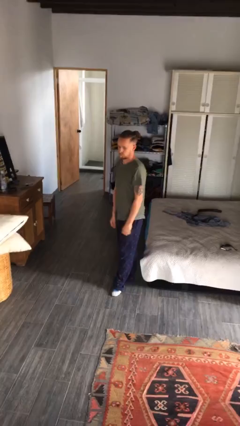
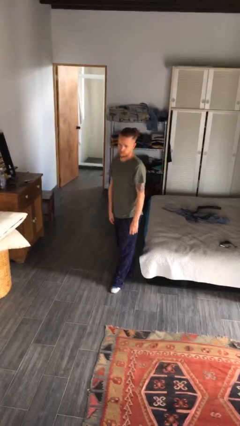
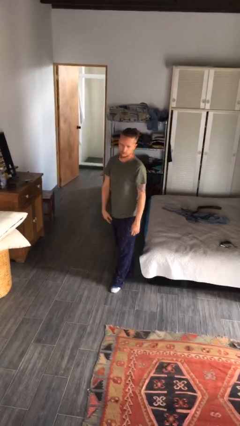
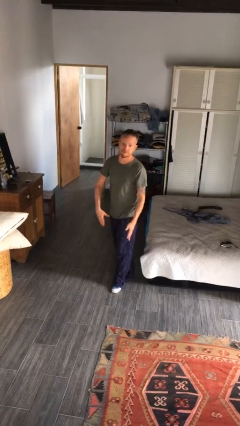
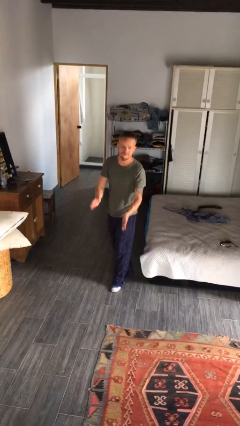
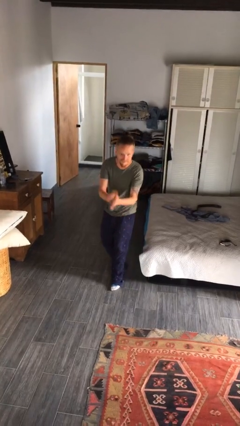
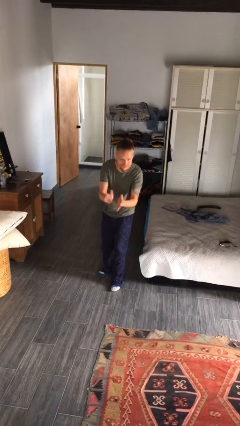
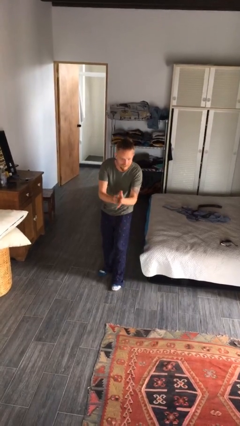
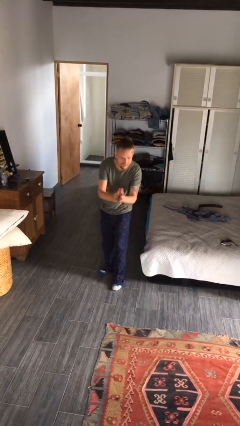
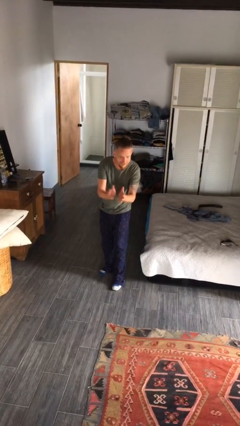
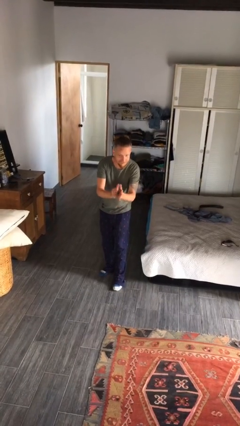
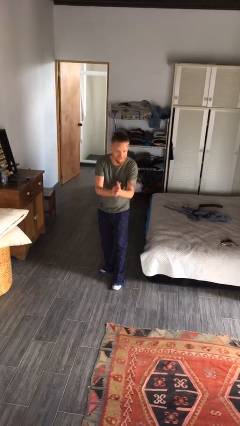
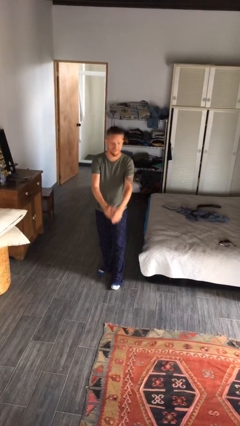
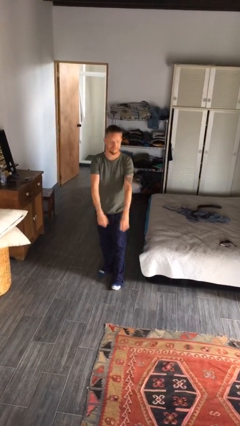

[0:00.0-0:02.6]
person claps hands

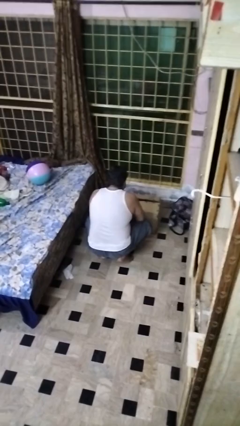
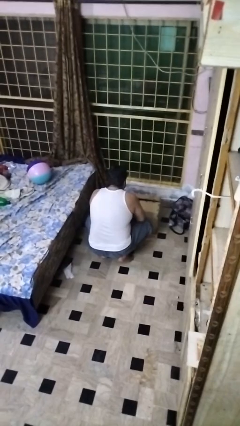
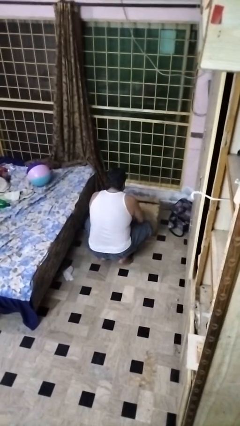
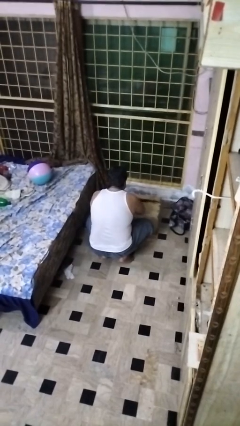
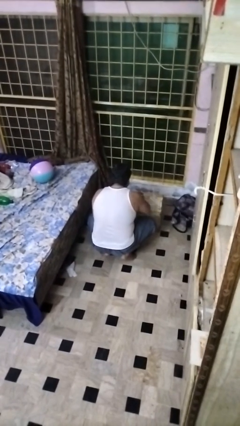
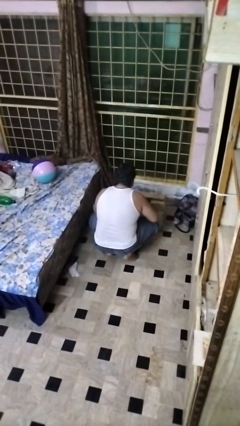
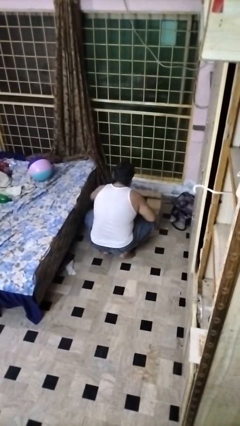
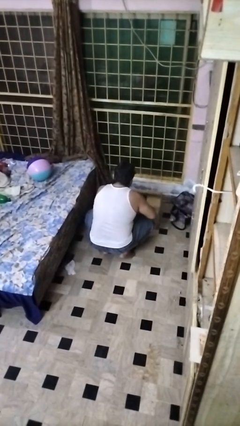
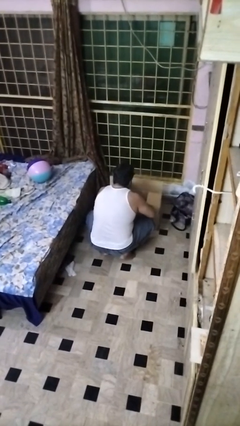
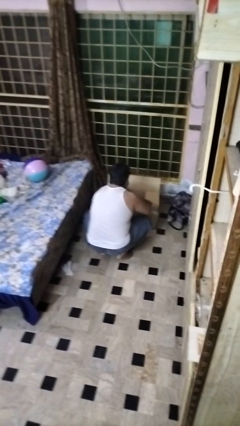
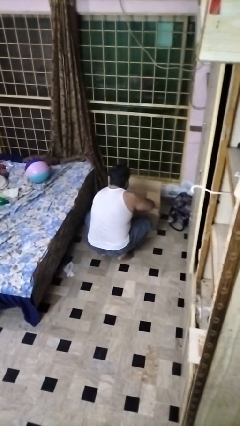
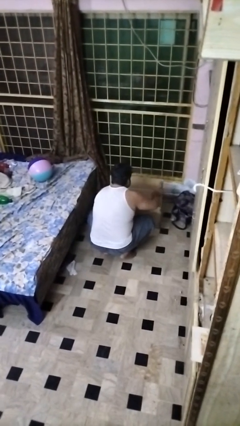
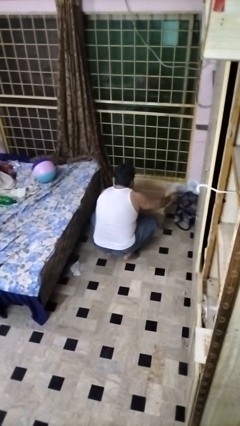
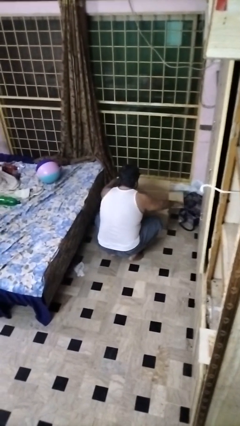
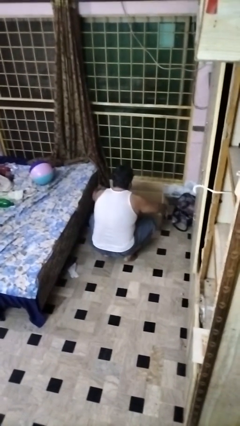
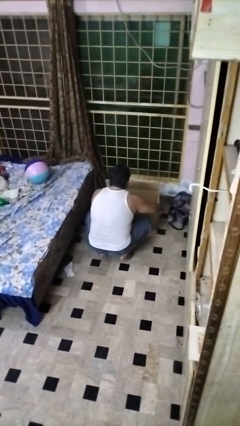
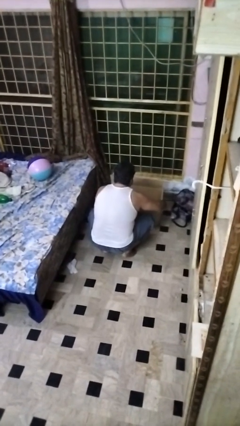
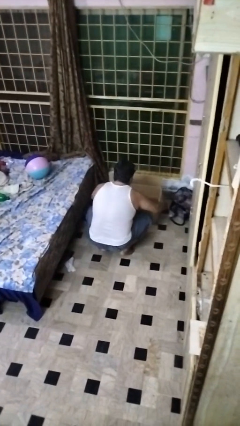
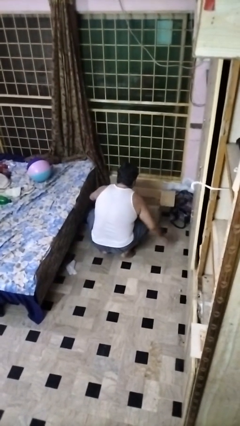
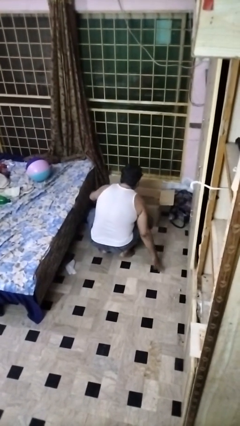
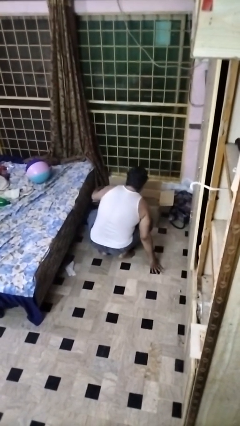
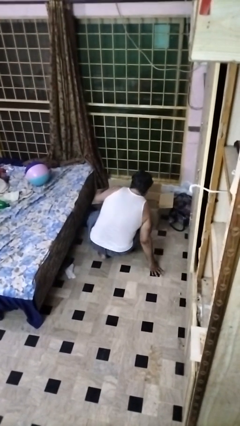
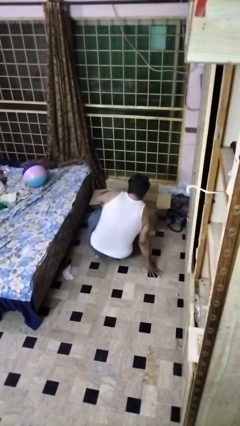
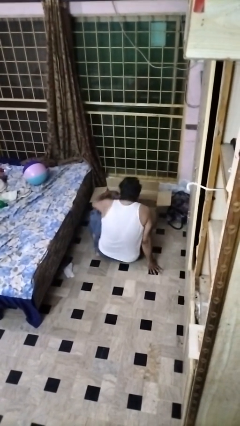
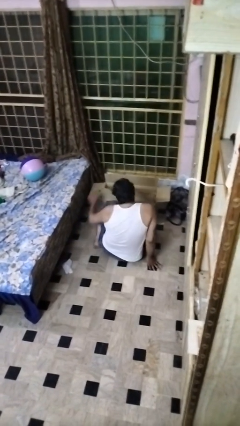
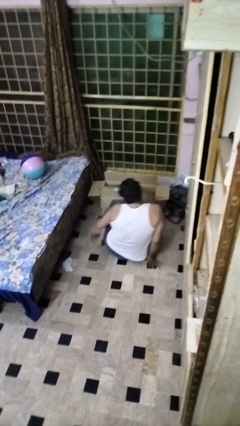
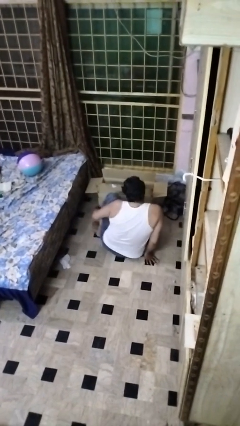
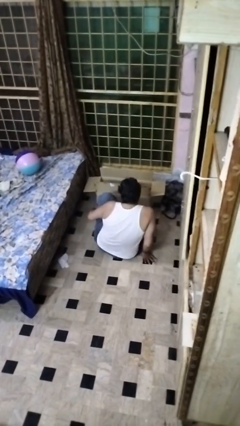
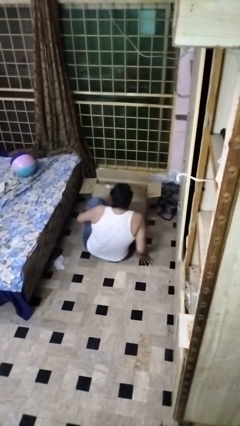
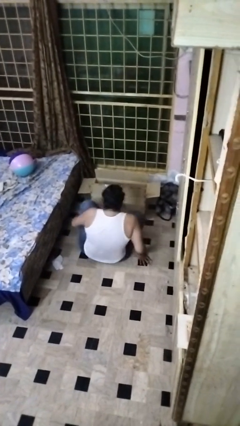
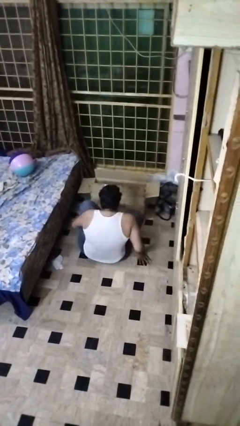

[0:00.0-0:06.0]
person opens box

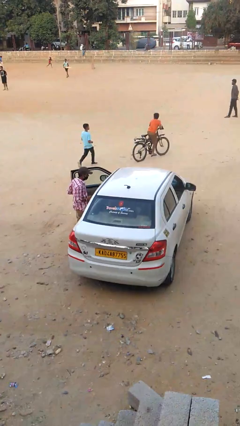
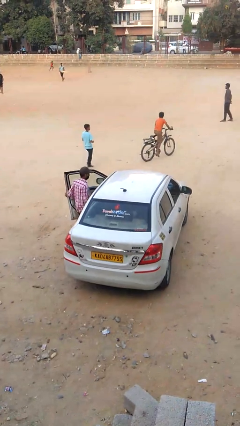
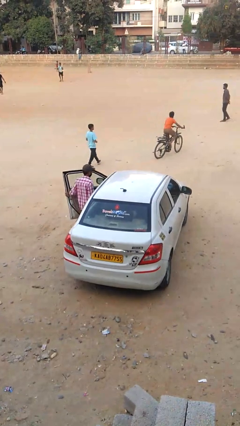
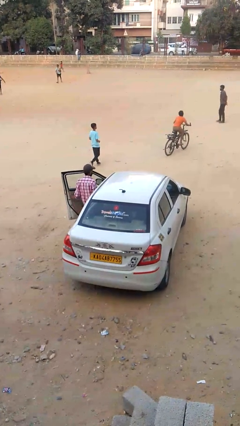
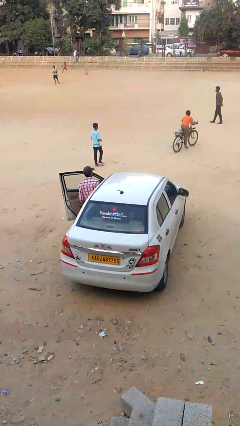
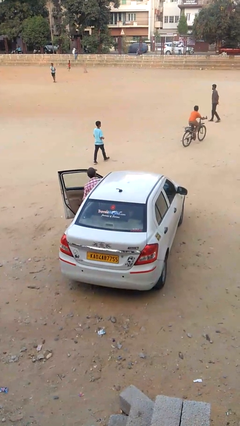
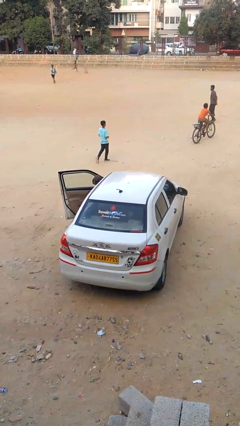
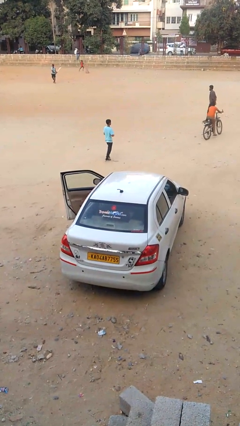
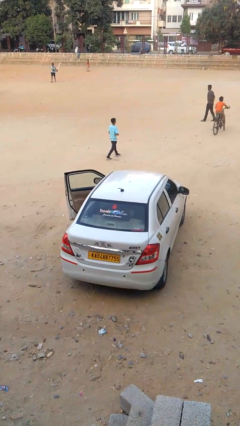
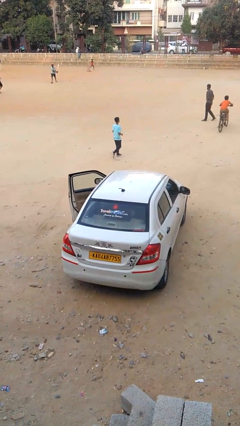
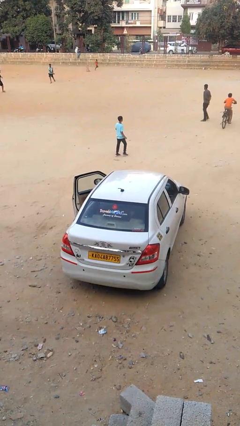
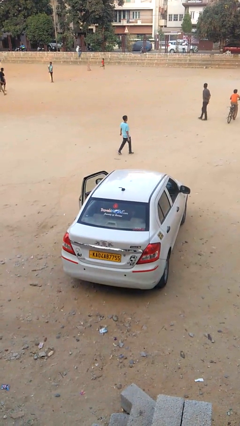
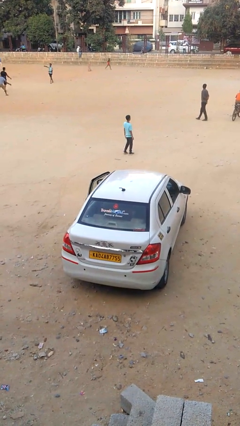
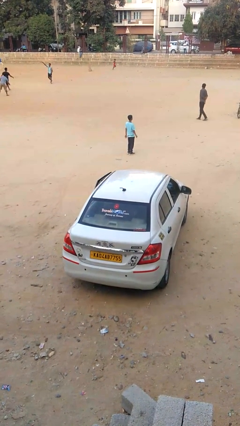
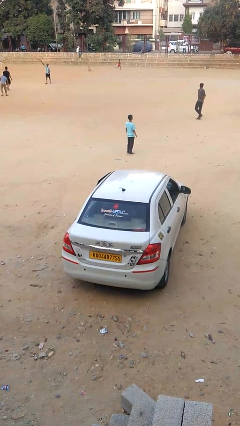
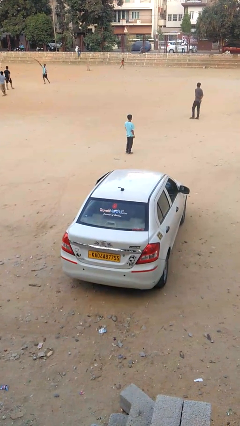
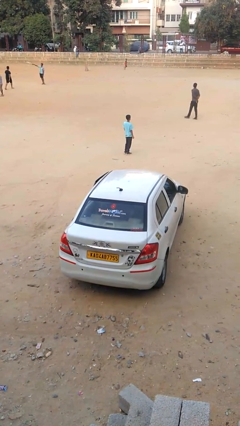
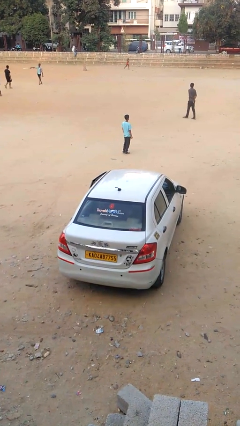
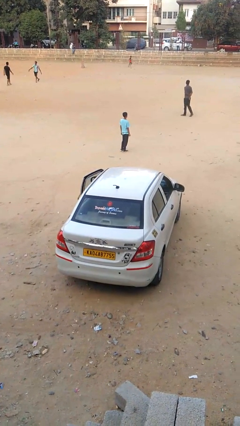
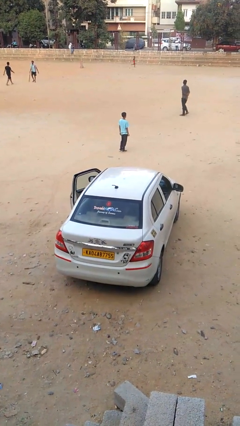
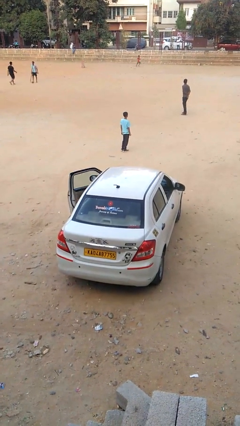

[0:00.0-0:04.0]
car picks up person

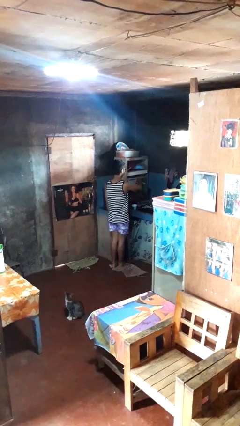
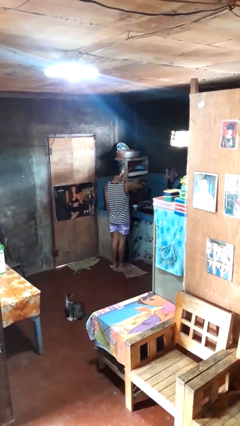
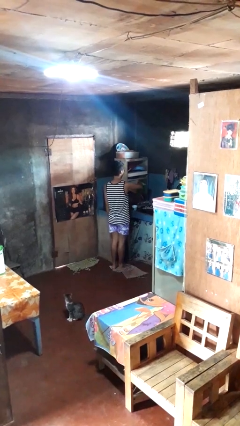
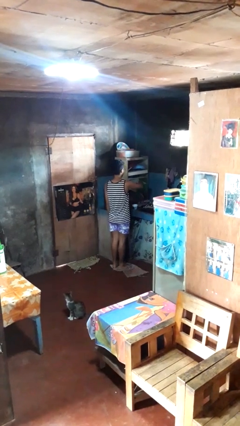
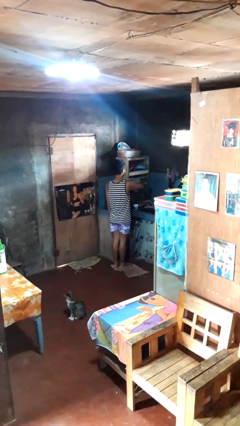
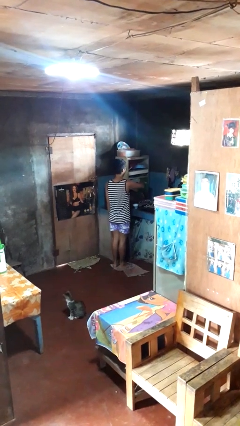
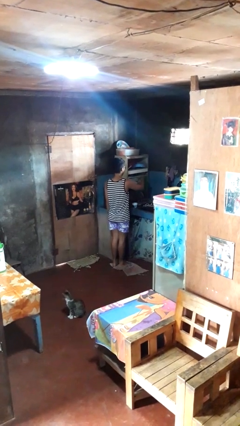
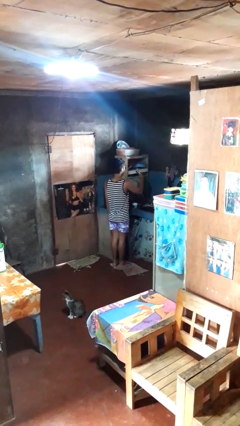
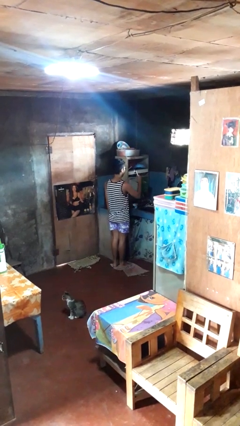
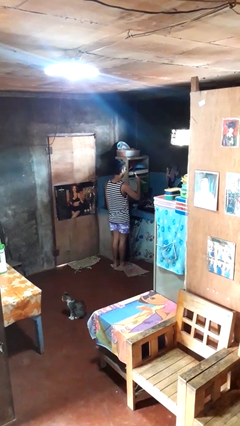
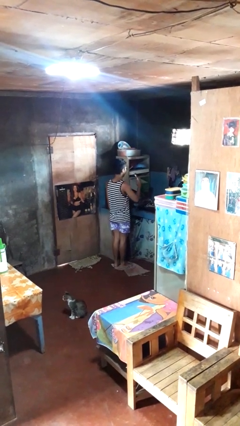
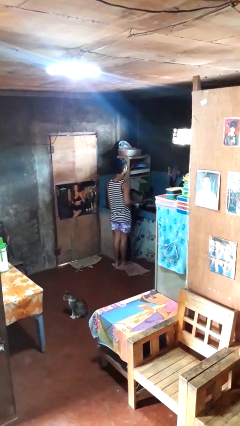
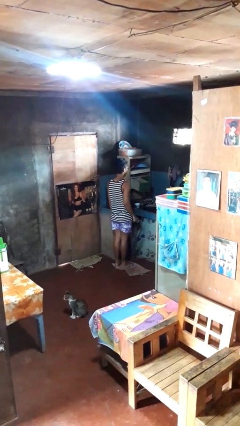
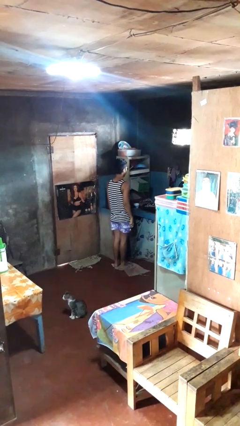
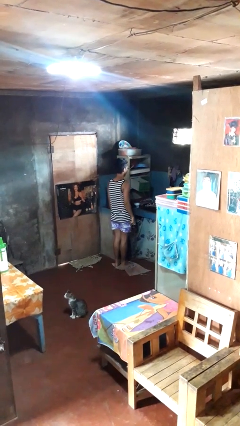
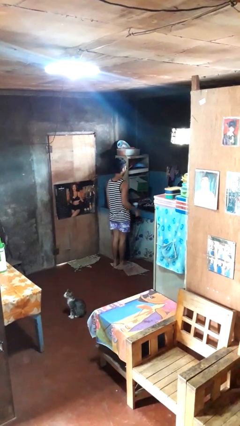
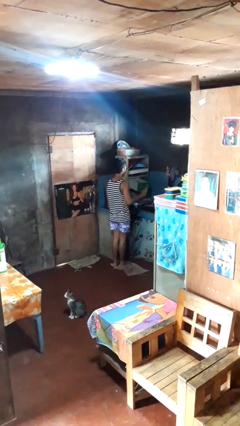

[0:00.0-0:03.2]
person takes object from kitchen drawer

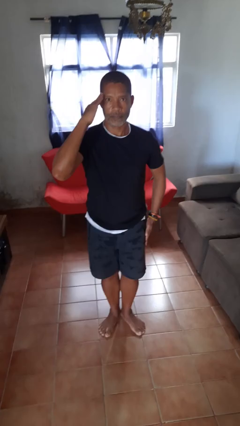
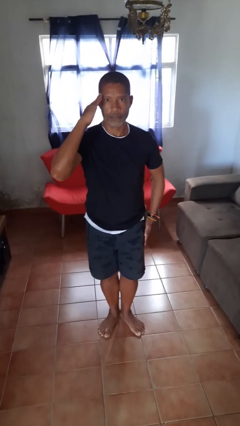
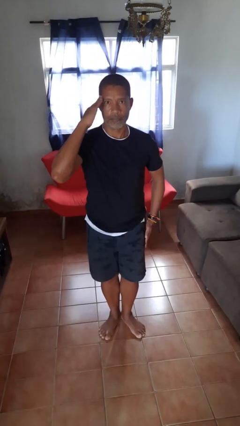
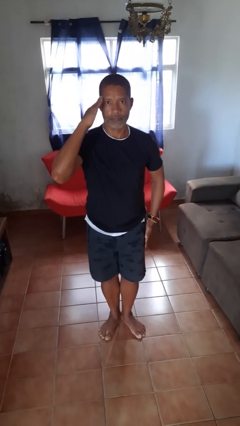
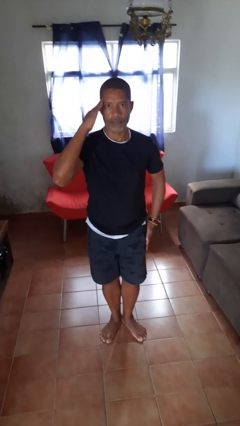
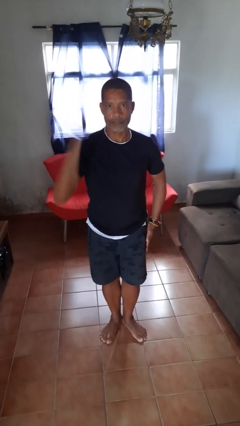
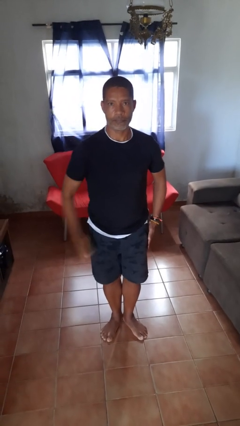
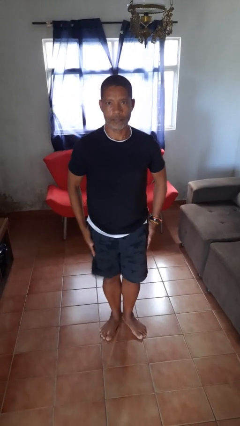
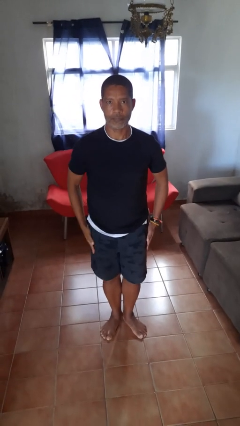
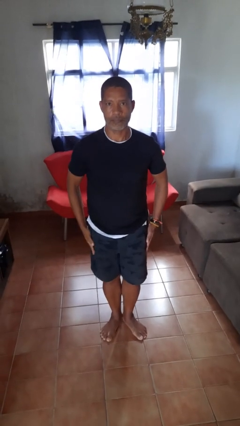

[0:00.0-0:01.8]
person salutes
